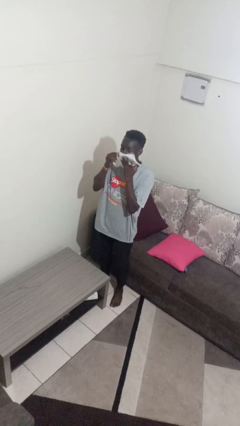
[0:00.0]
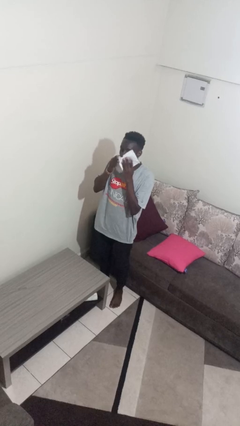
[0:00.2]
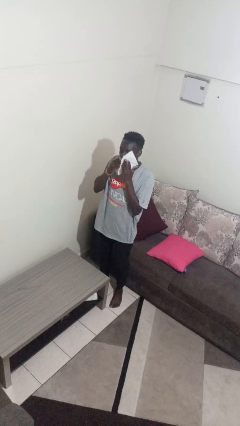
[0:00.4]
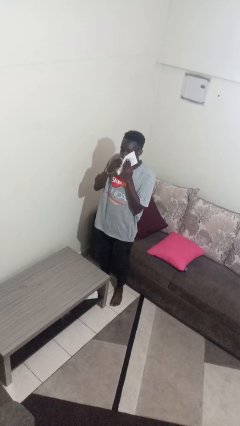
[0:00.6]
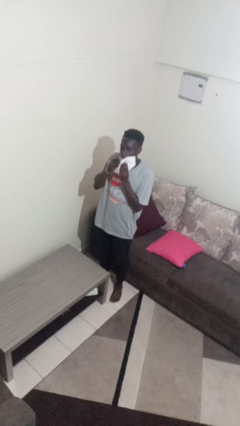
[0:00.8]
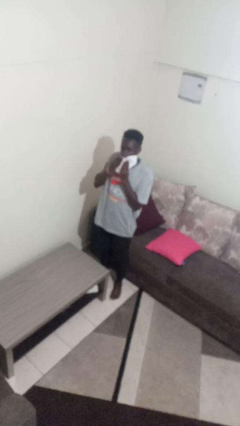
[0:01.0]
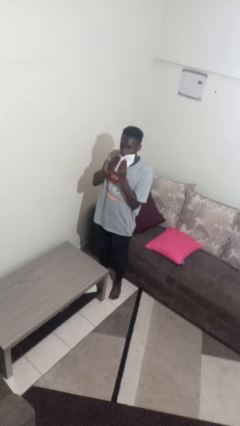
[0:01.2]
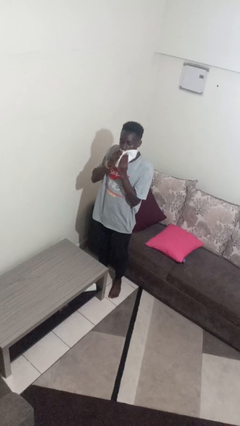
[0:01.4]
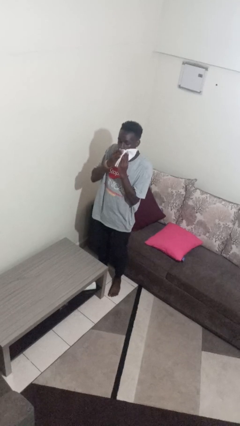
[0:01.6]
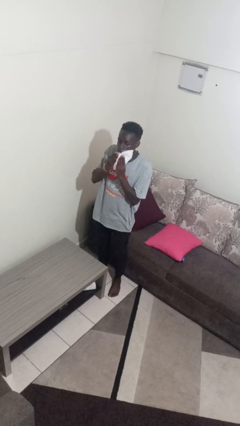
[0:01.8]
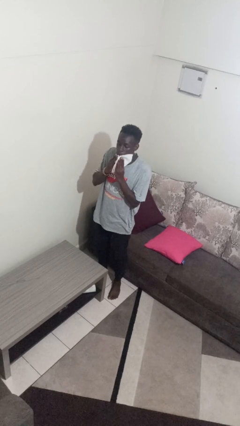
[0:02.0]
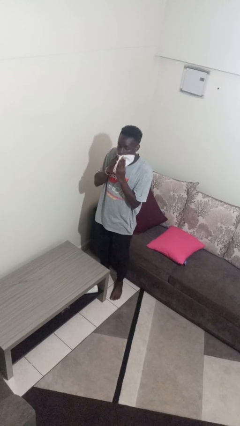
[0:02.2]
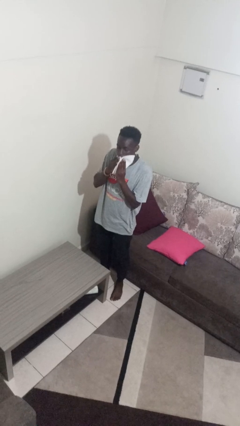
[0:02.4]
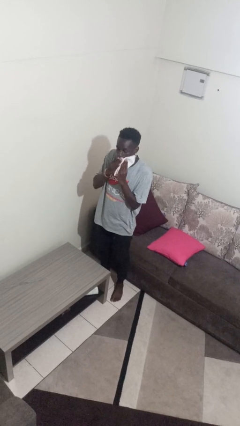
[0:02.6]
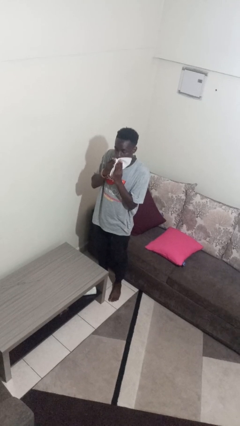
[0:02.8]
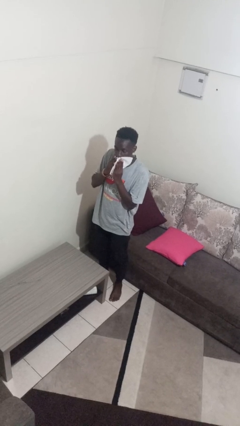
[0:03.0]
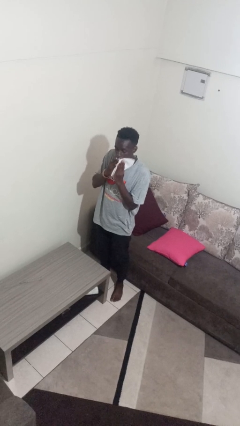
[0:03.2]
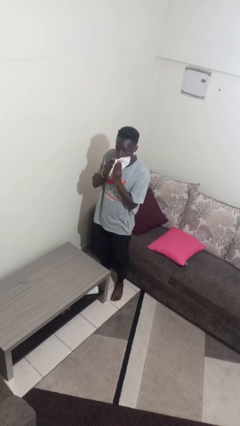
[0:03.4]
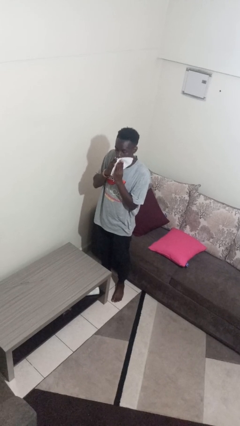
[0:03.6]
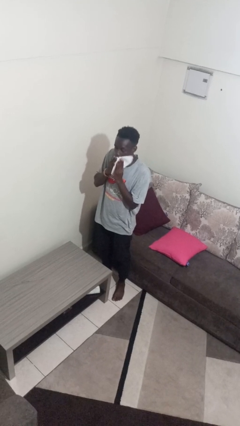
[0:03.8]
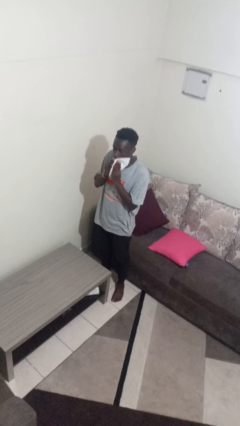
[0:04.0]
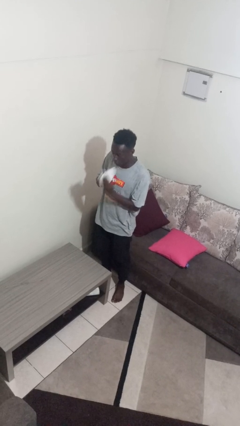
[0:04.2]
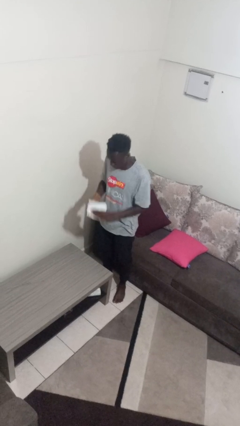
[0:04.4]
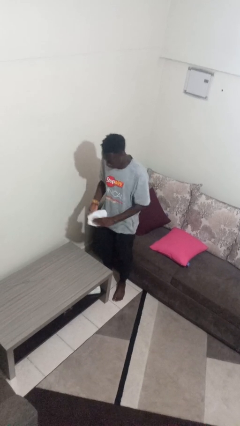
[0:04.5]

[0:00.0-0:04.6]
person wipes mouth with napkin

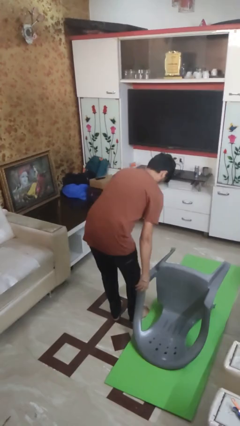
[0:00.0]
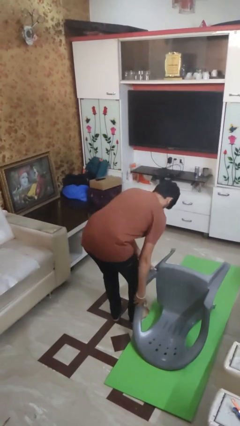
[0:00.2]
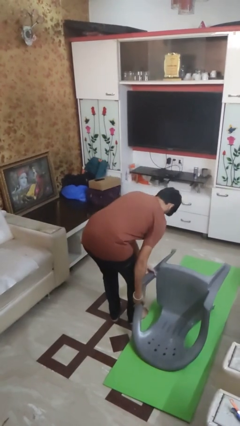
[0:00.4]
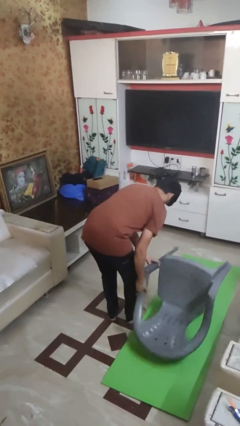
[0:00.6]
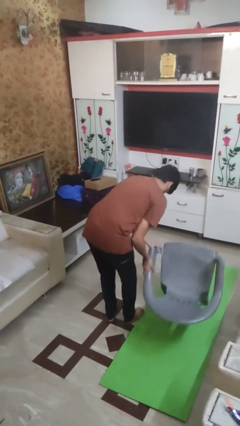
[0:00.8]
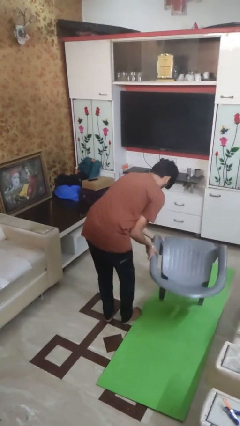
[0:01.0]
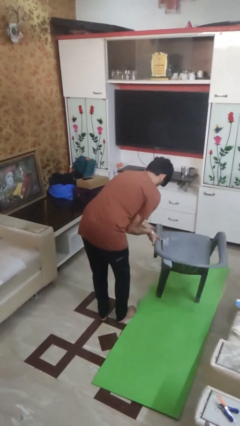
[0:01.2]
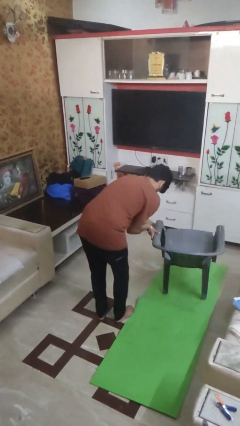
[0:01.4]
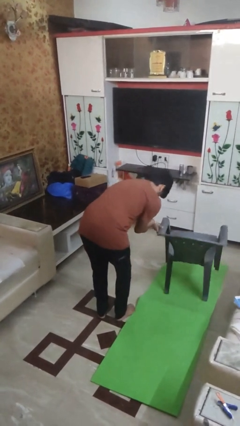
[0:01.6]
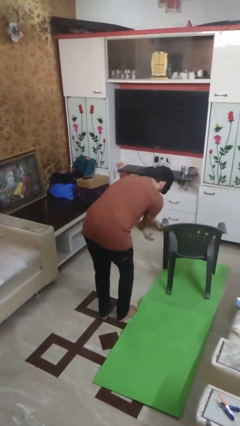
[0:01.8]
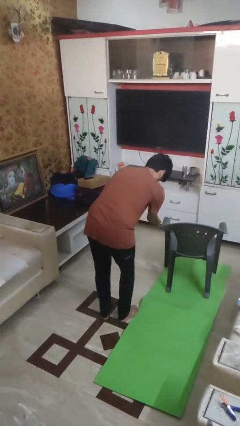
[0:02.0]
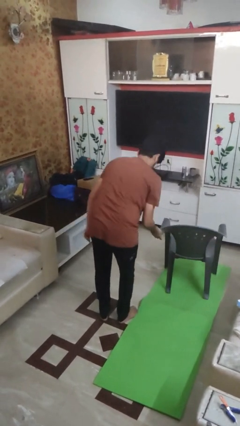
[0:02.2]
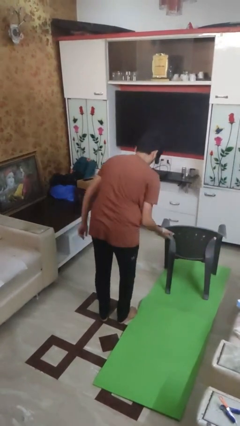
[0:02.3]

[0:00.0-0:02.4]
person sets upright furniture

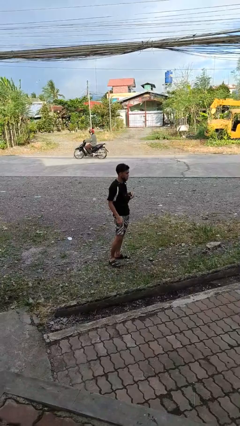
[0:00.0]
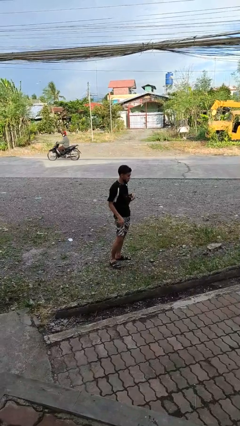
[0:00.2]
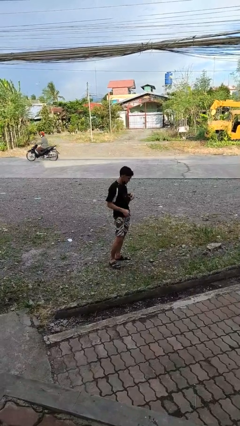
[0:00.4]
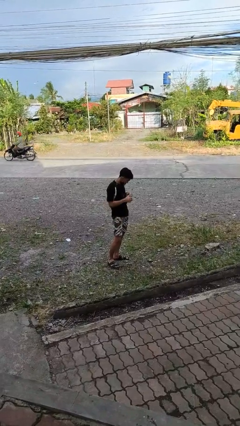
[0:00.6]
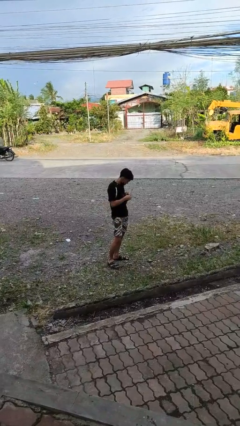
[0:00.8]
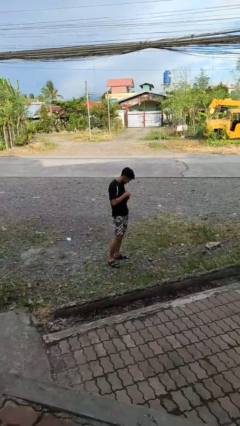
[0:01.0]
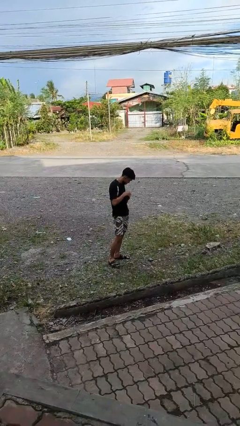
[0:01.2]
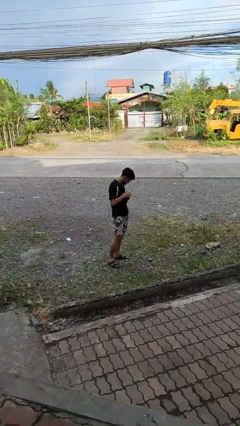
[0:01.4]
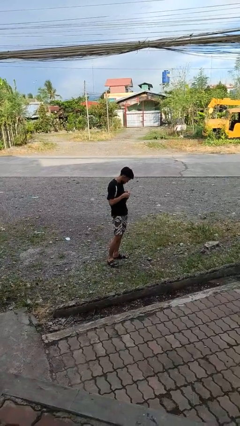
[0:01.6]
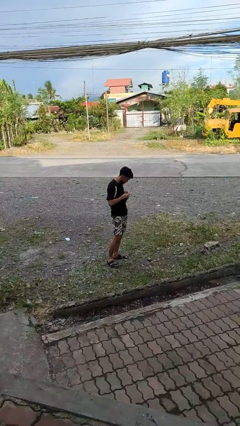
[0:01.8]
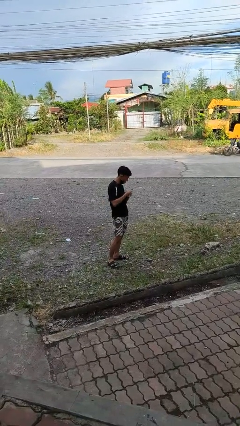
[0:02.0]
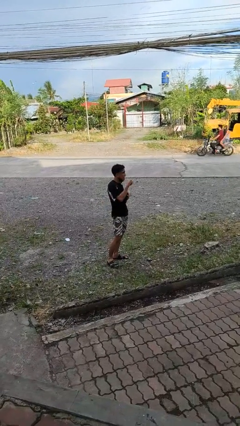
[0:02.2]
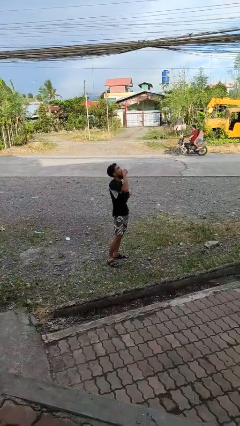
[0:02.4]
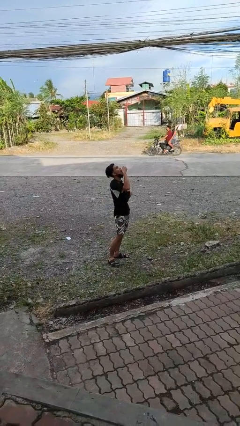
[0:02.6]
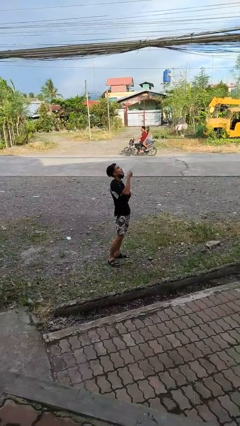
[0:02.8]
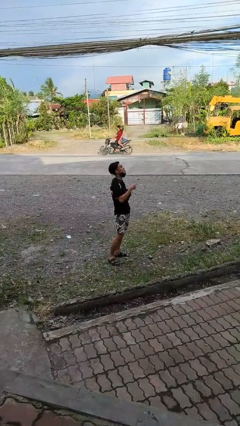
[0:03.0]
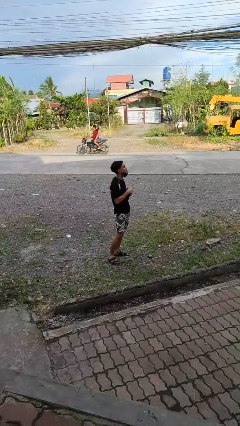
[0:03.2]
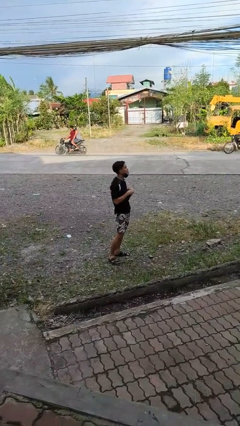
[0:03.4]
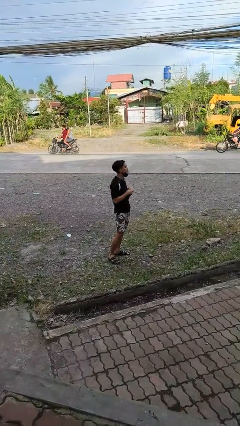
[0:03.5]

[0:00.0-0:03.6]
person eats snack from bag

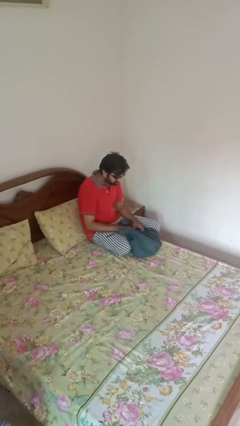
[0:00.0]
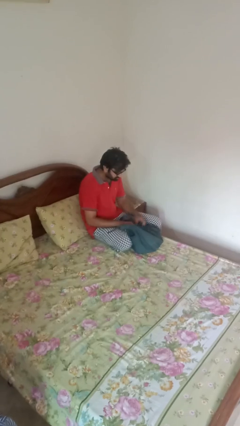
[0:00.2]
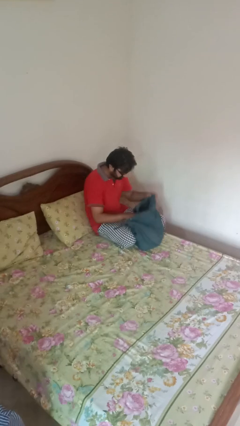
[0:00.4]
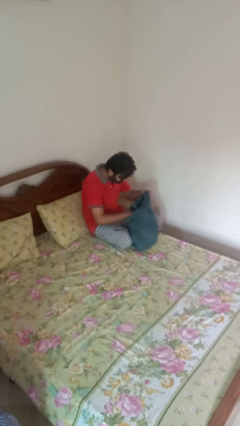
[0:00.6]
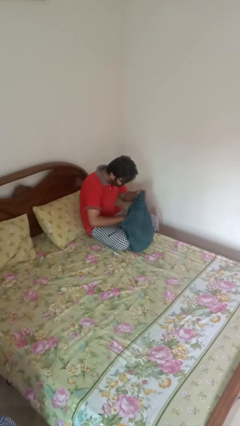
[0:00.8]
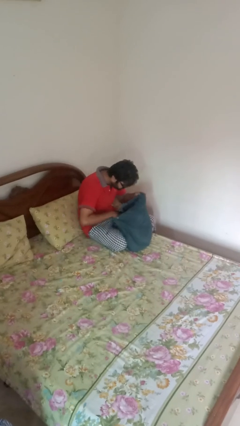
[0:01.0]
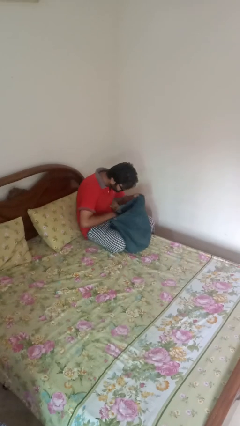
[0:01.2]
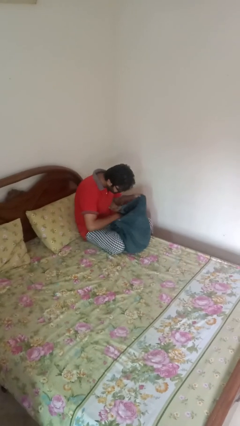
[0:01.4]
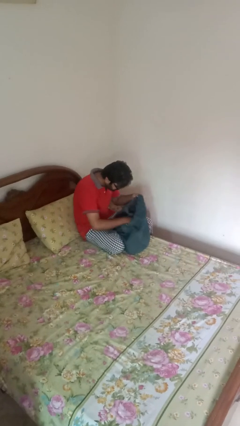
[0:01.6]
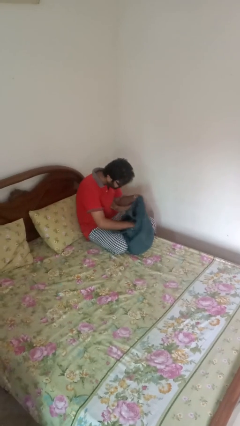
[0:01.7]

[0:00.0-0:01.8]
person searches in bag

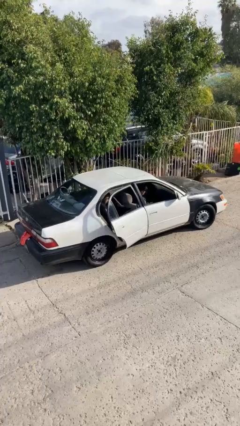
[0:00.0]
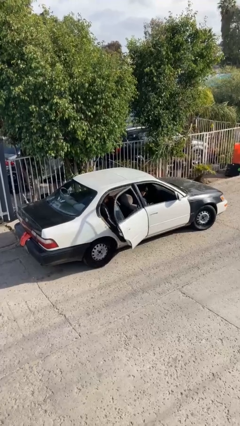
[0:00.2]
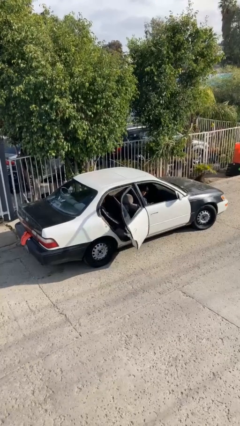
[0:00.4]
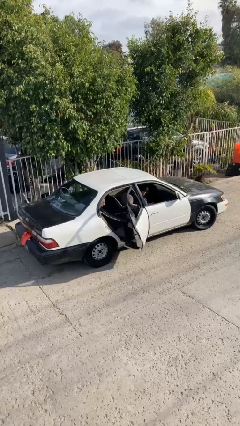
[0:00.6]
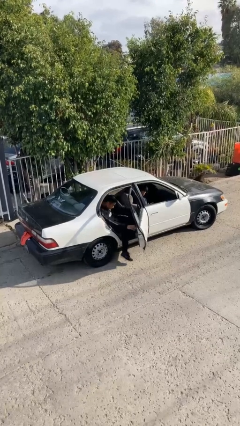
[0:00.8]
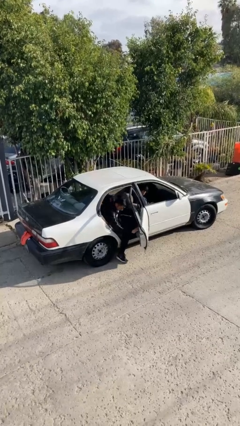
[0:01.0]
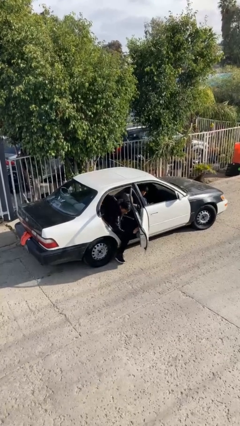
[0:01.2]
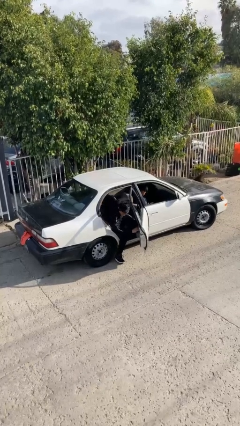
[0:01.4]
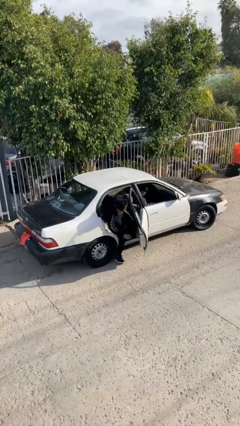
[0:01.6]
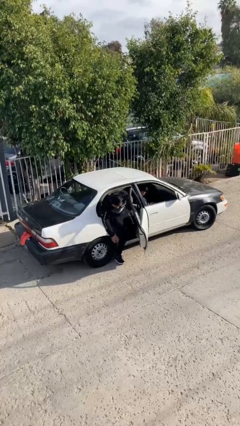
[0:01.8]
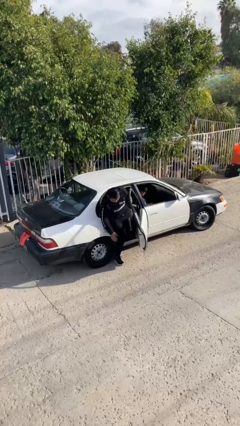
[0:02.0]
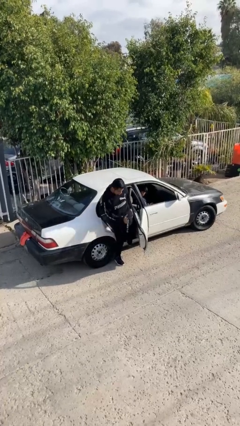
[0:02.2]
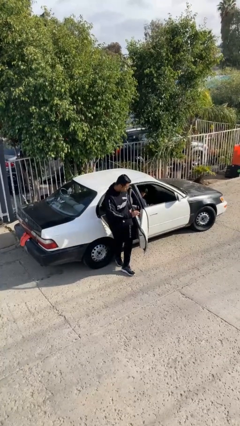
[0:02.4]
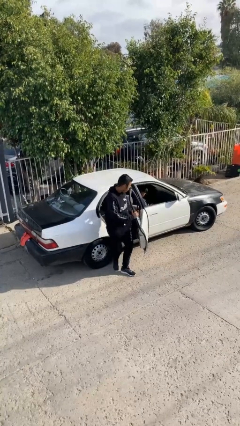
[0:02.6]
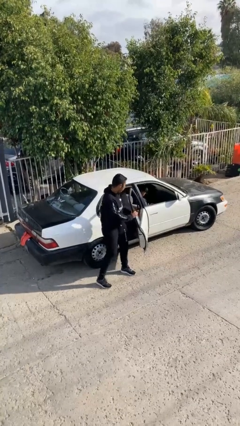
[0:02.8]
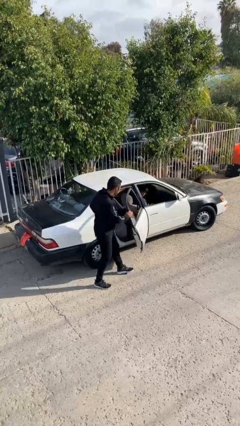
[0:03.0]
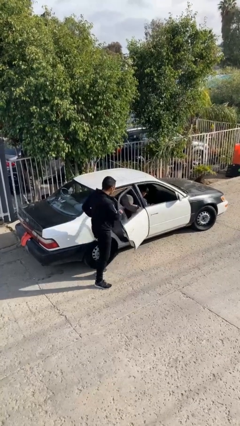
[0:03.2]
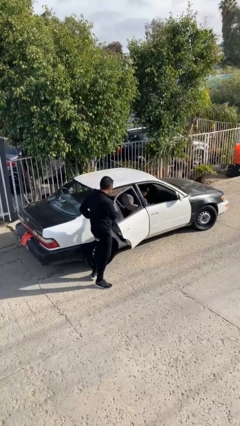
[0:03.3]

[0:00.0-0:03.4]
car drops off person

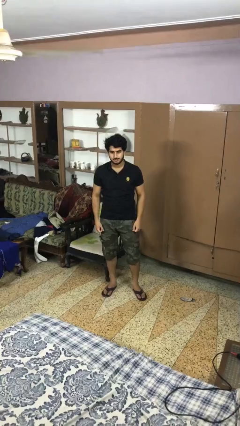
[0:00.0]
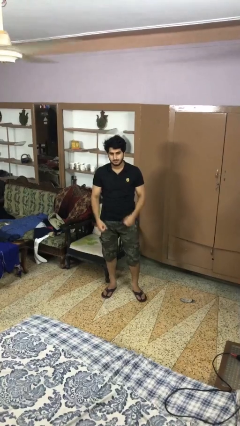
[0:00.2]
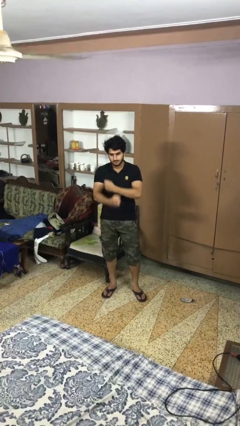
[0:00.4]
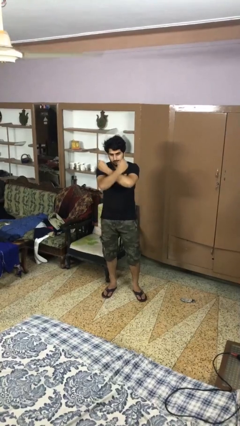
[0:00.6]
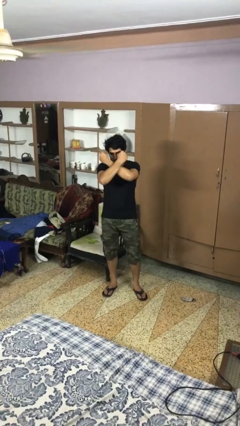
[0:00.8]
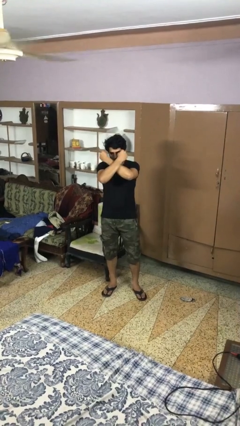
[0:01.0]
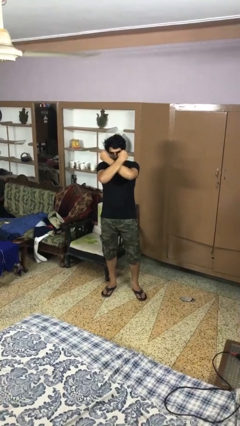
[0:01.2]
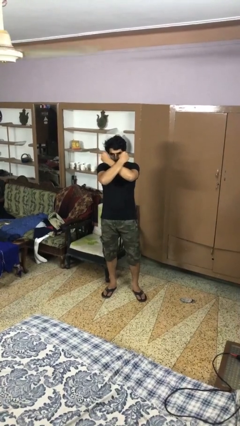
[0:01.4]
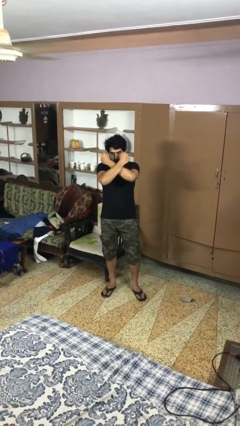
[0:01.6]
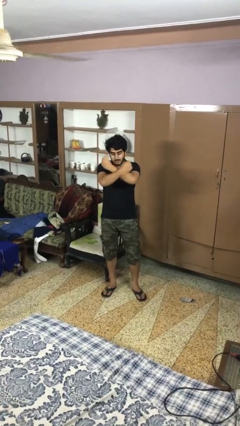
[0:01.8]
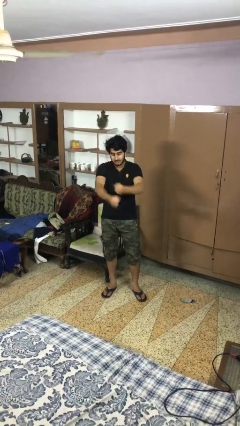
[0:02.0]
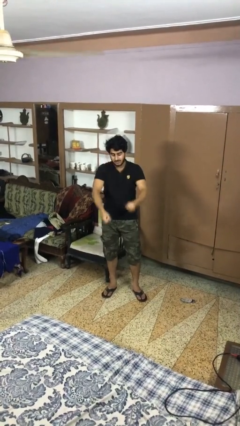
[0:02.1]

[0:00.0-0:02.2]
person gestures arms x
